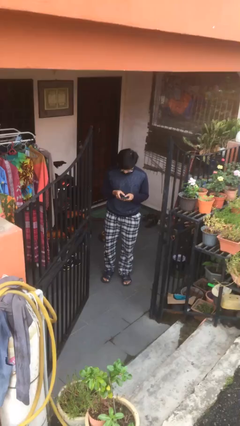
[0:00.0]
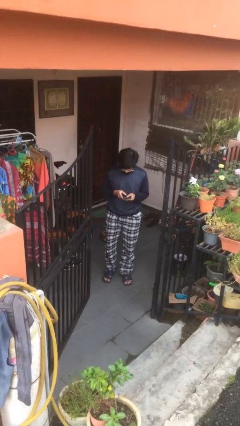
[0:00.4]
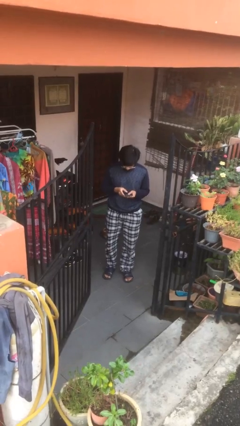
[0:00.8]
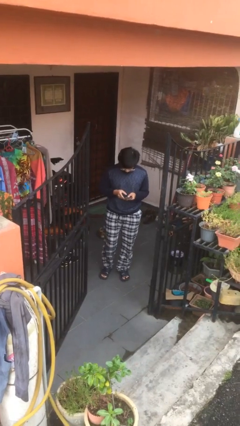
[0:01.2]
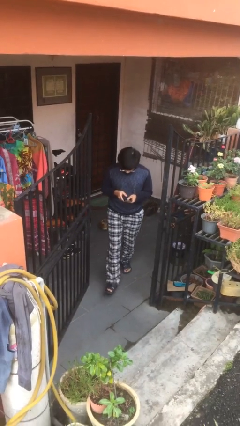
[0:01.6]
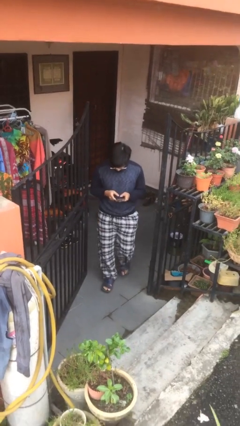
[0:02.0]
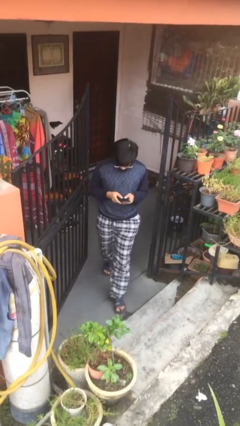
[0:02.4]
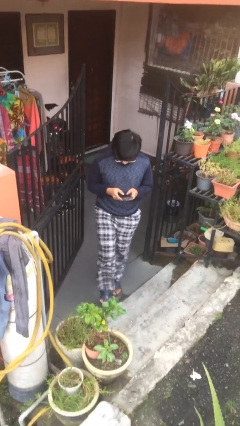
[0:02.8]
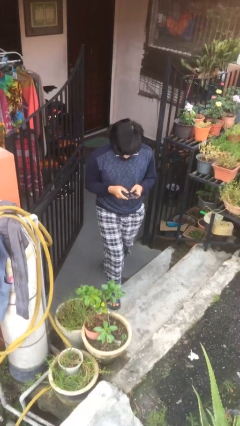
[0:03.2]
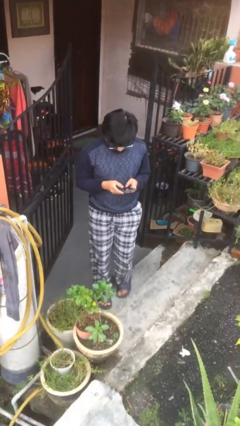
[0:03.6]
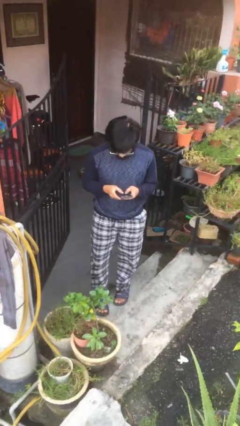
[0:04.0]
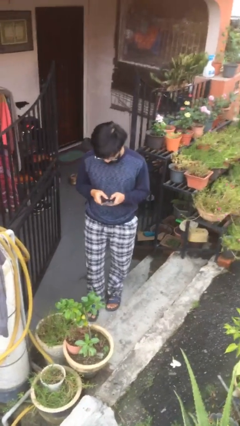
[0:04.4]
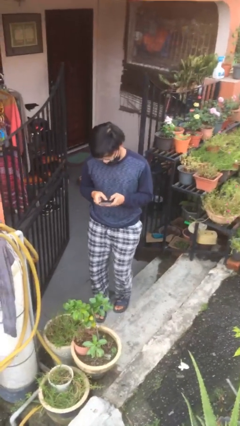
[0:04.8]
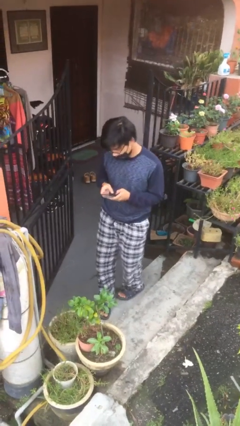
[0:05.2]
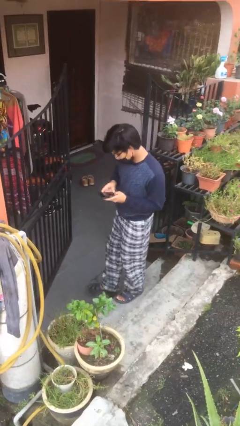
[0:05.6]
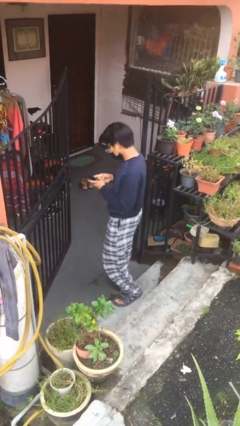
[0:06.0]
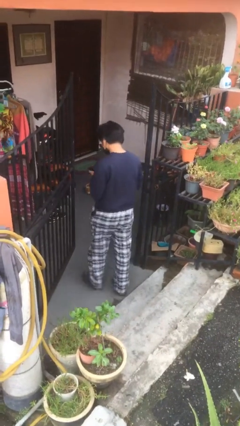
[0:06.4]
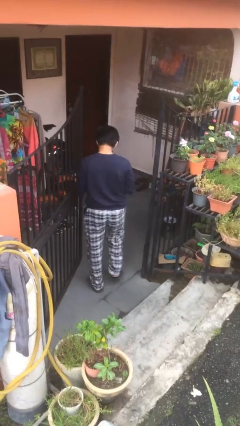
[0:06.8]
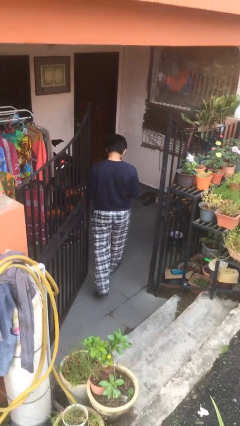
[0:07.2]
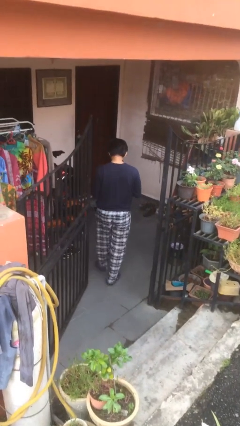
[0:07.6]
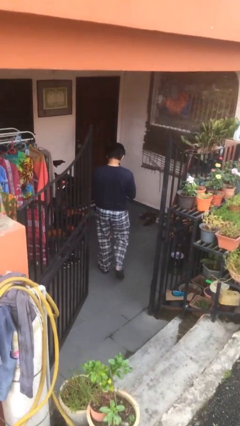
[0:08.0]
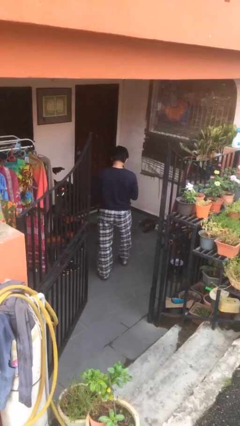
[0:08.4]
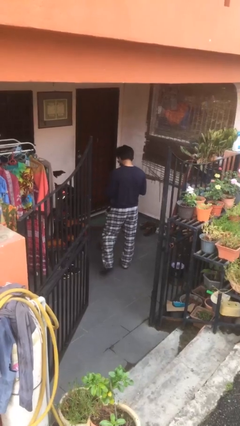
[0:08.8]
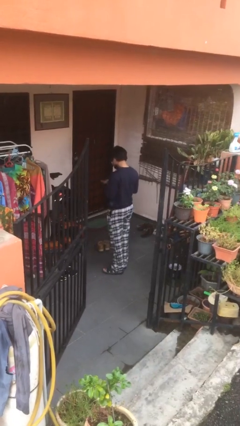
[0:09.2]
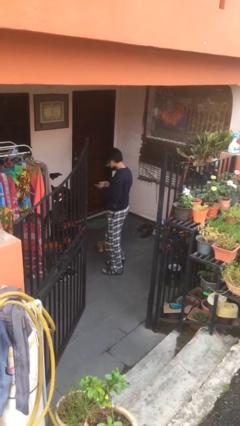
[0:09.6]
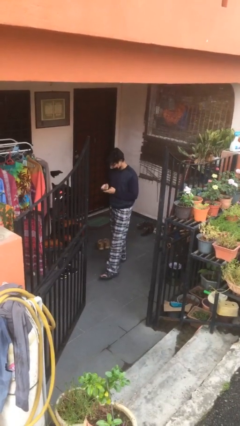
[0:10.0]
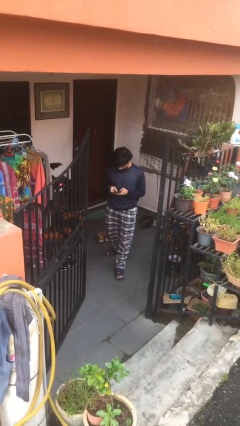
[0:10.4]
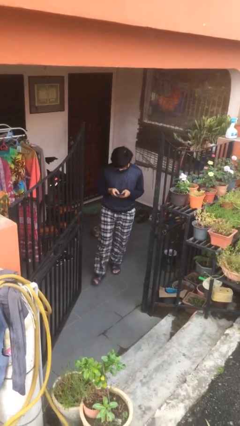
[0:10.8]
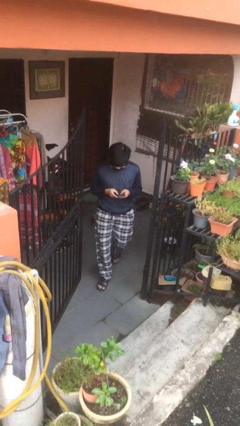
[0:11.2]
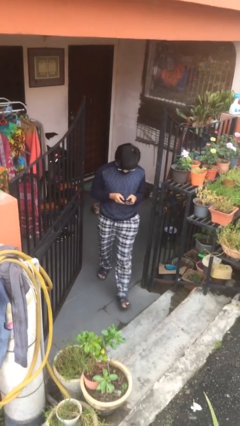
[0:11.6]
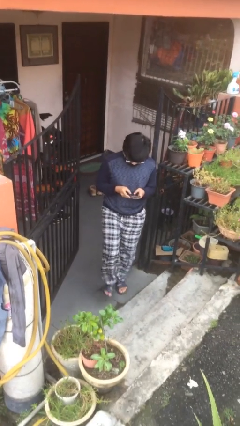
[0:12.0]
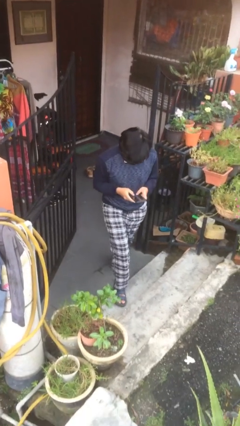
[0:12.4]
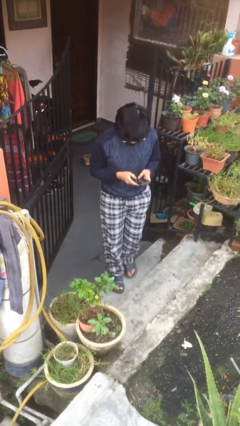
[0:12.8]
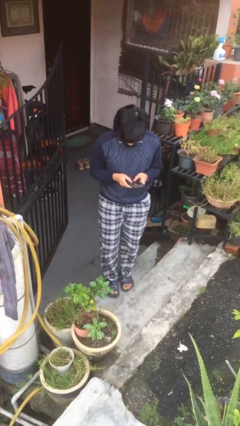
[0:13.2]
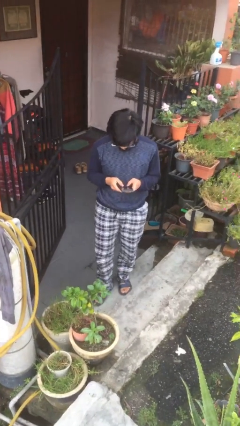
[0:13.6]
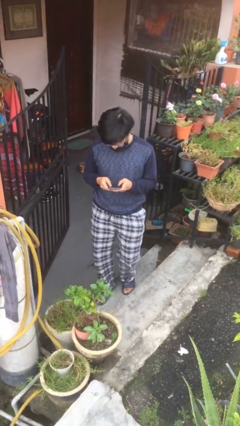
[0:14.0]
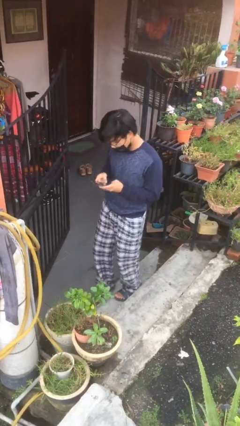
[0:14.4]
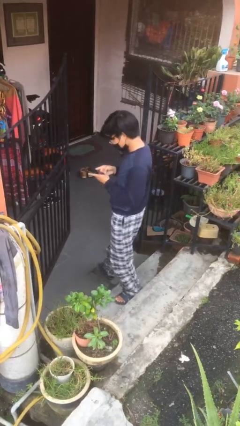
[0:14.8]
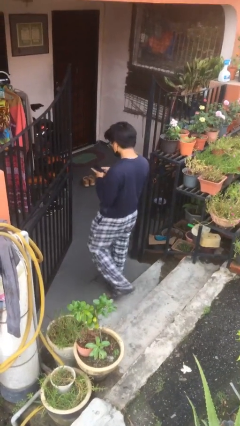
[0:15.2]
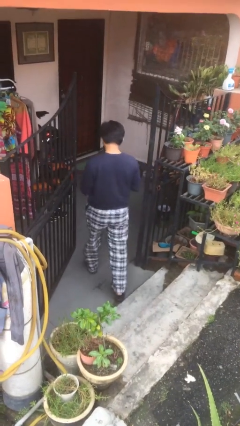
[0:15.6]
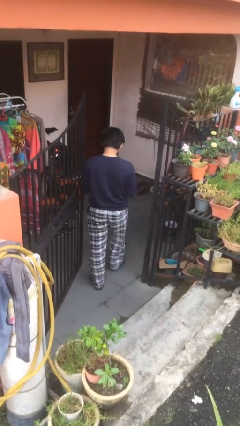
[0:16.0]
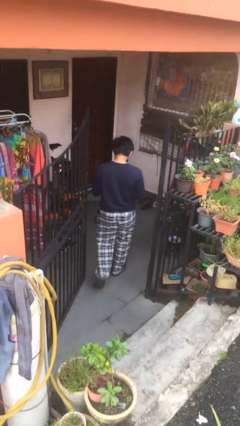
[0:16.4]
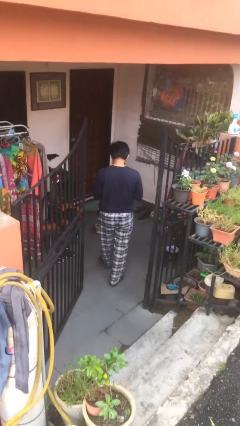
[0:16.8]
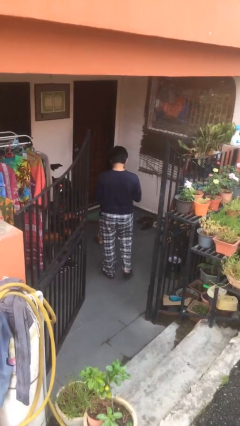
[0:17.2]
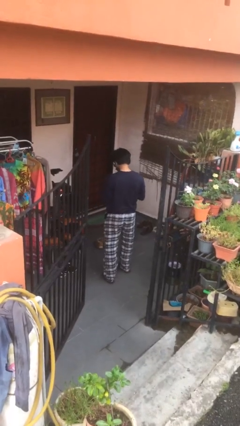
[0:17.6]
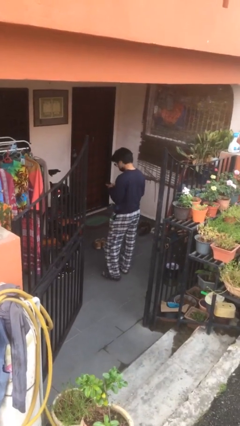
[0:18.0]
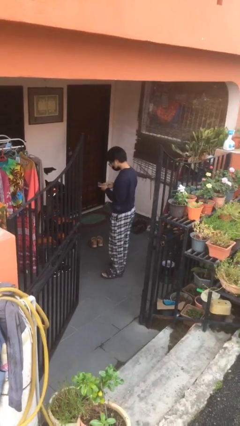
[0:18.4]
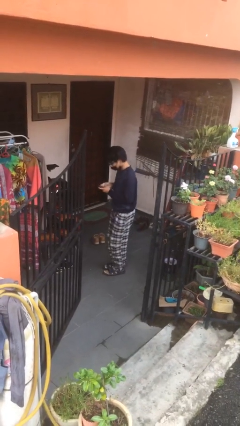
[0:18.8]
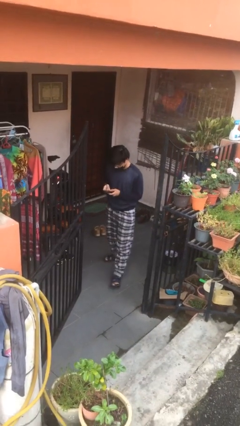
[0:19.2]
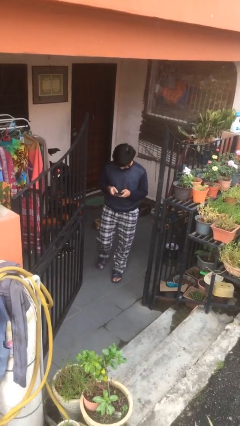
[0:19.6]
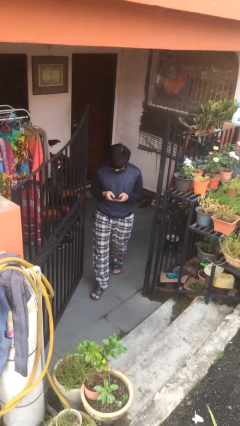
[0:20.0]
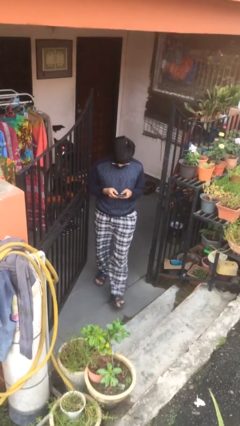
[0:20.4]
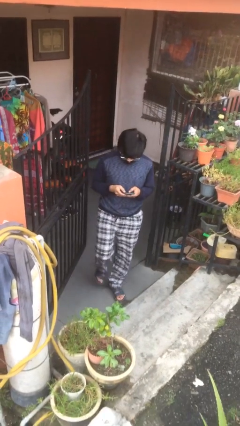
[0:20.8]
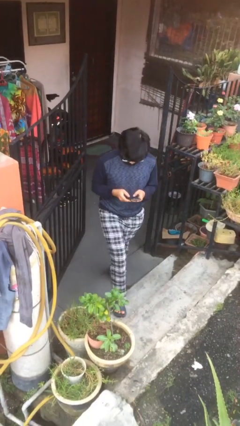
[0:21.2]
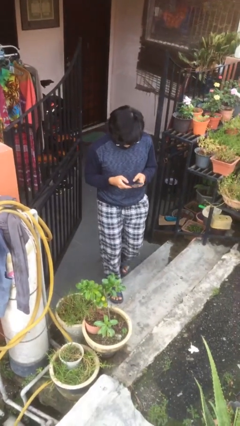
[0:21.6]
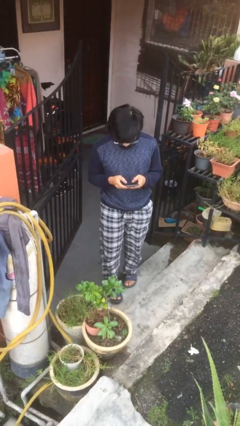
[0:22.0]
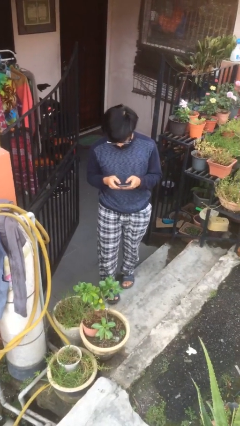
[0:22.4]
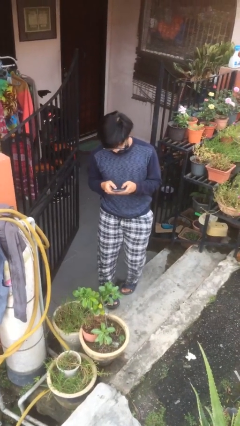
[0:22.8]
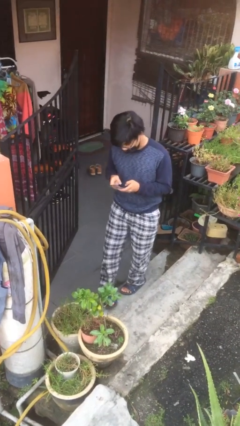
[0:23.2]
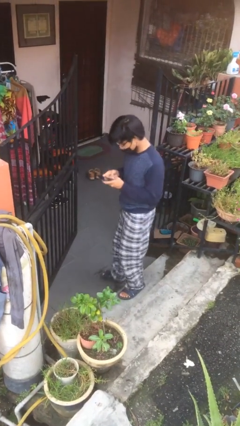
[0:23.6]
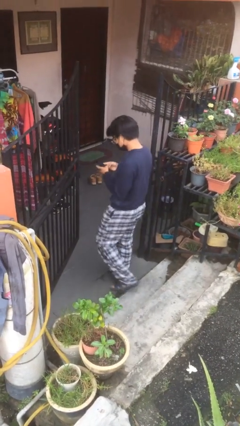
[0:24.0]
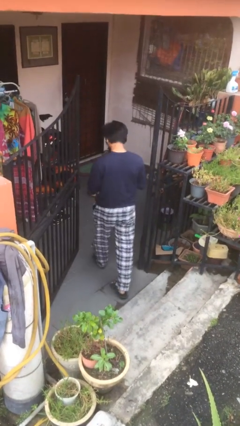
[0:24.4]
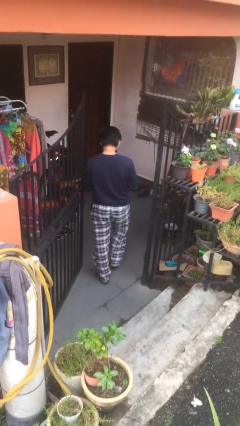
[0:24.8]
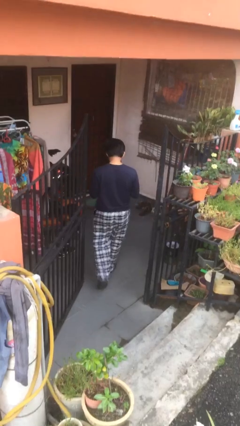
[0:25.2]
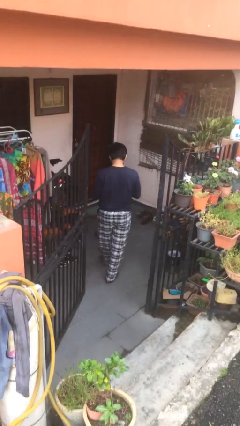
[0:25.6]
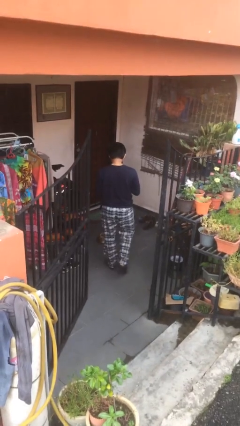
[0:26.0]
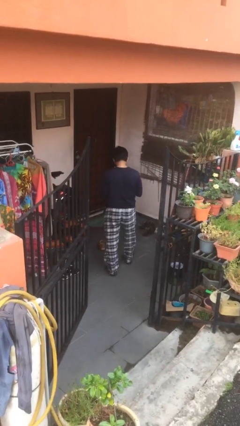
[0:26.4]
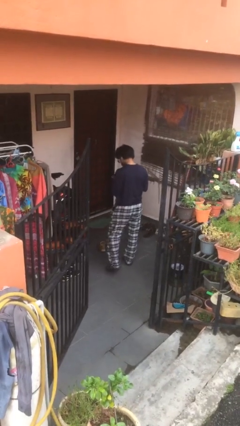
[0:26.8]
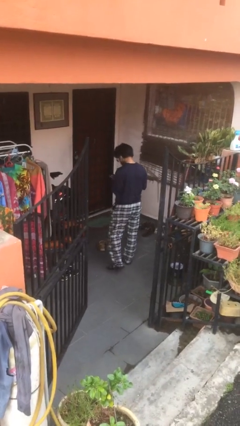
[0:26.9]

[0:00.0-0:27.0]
person texts on phone

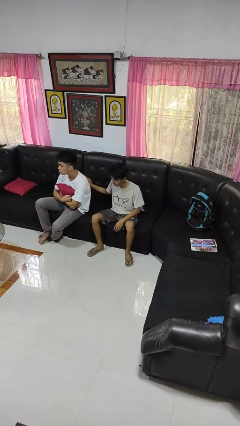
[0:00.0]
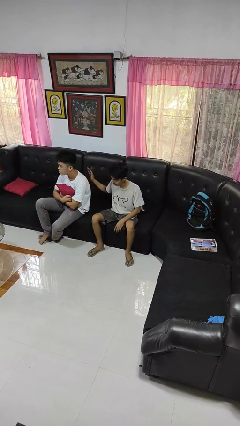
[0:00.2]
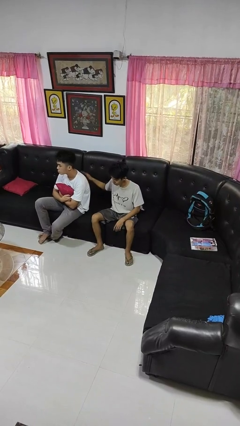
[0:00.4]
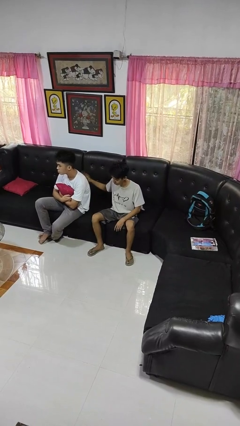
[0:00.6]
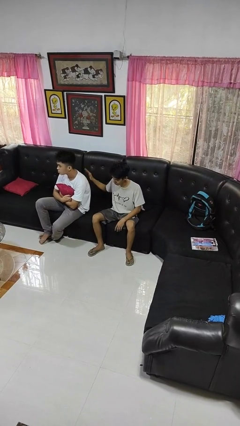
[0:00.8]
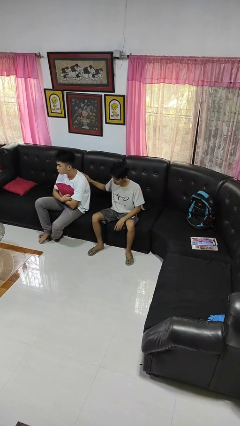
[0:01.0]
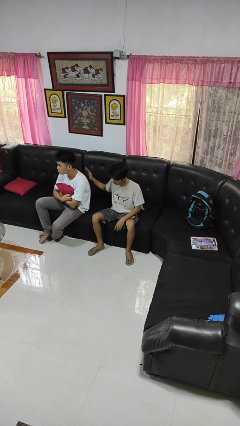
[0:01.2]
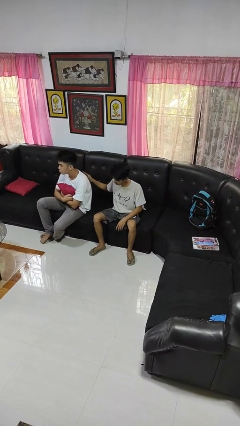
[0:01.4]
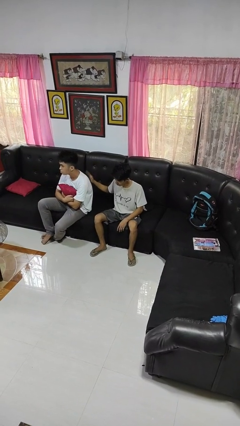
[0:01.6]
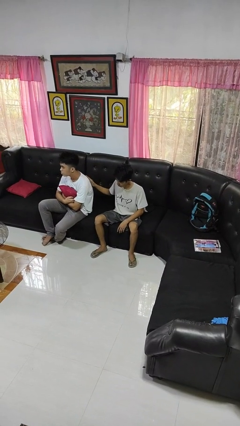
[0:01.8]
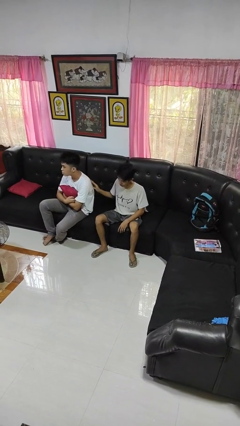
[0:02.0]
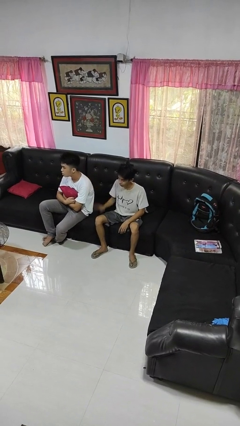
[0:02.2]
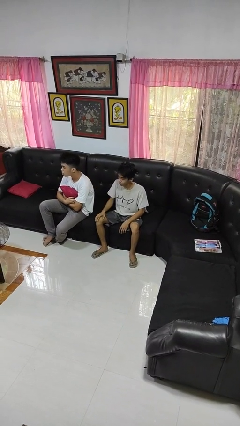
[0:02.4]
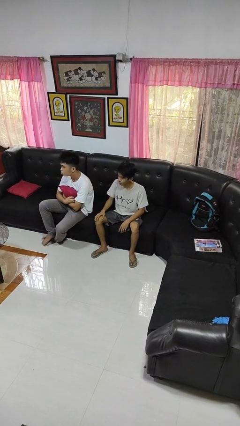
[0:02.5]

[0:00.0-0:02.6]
person touches back of person

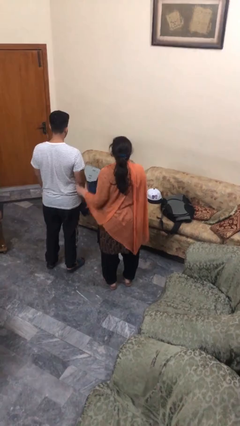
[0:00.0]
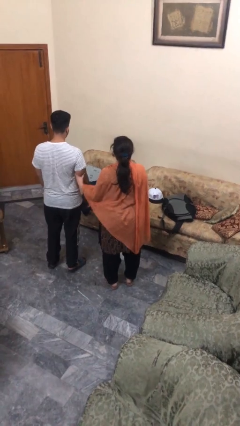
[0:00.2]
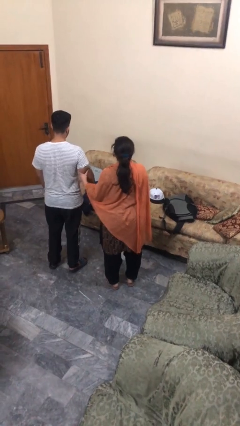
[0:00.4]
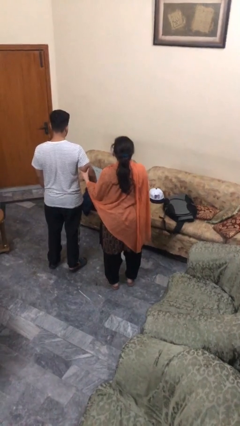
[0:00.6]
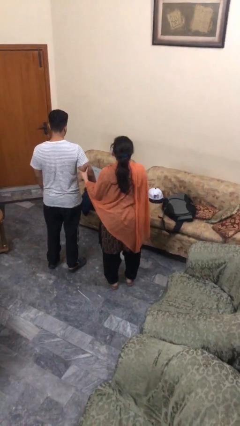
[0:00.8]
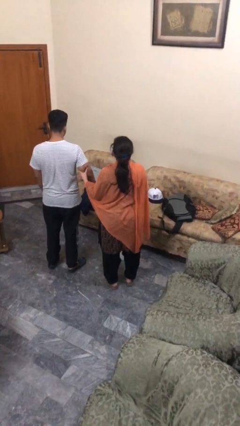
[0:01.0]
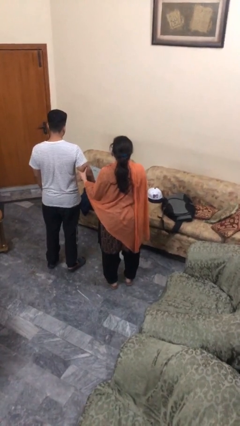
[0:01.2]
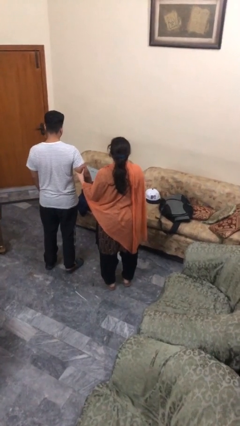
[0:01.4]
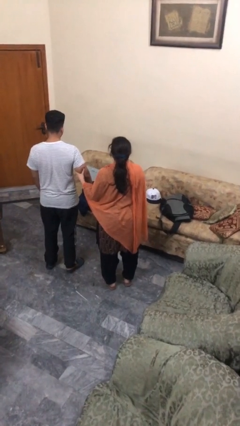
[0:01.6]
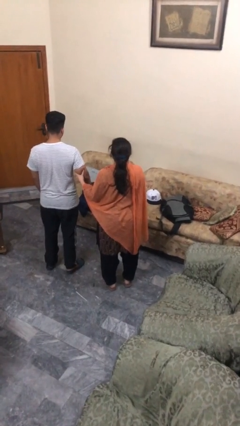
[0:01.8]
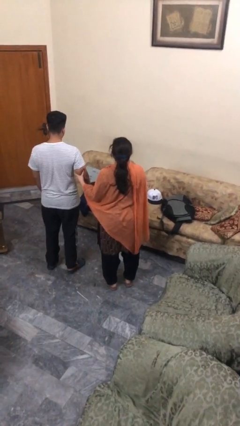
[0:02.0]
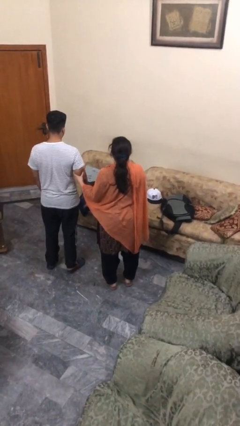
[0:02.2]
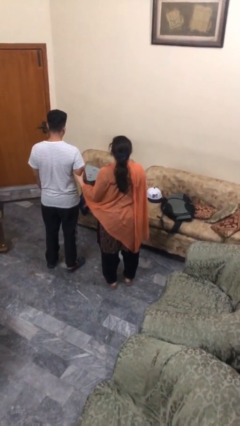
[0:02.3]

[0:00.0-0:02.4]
person grabs person by bicep
